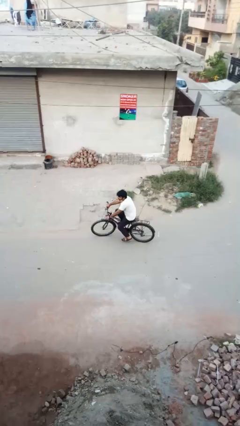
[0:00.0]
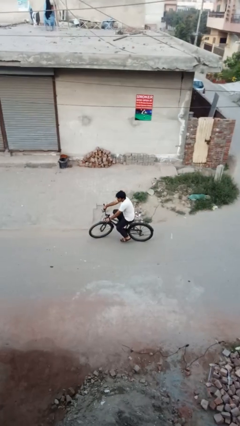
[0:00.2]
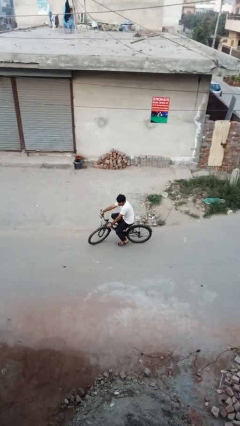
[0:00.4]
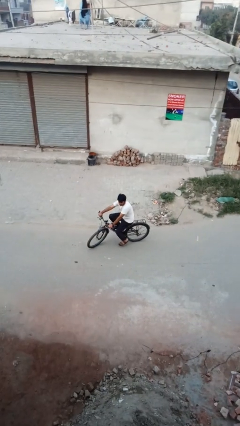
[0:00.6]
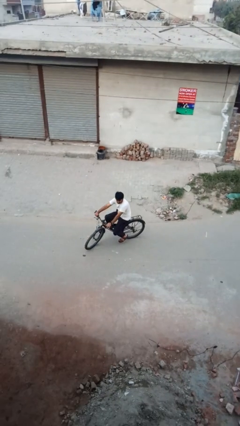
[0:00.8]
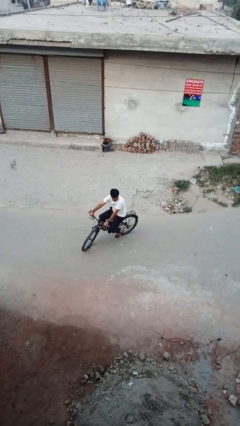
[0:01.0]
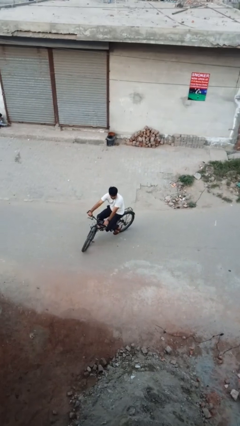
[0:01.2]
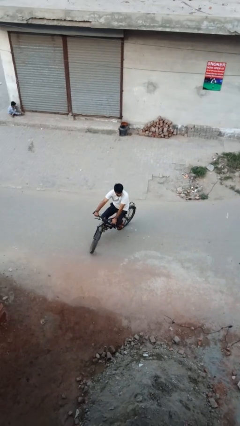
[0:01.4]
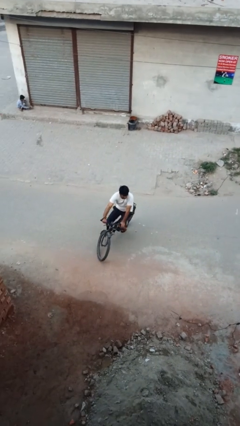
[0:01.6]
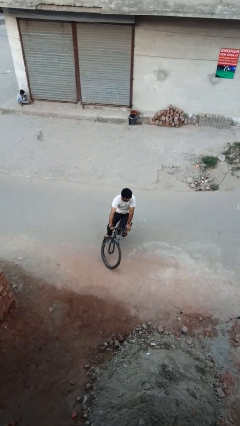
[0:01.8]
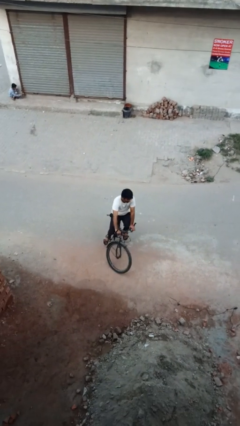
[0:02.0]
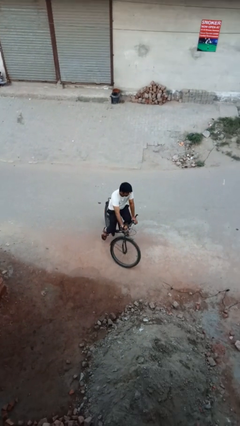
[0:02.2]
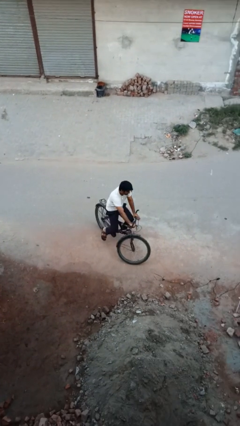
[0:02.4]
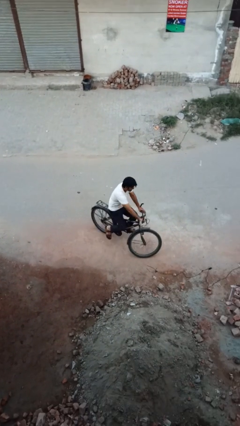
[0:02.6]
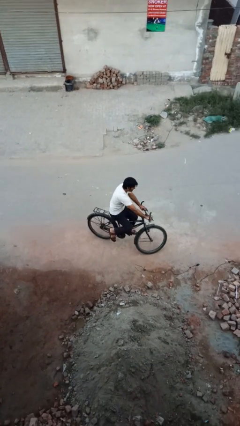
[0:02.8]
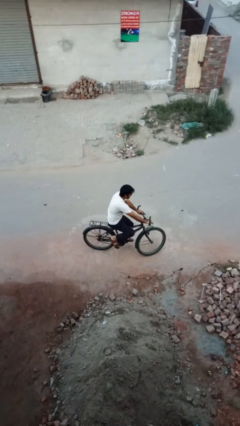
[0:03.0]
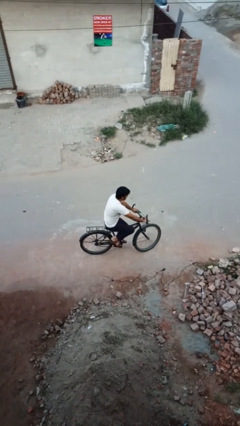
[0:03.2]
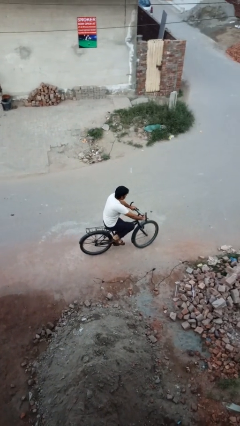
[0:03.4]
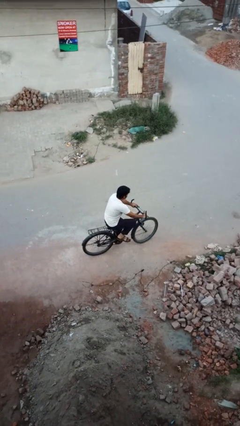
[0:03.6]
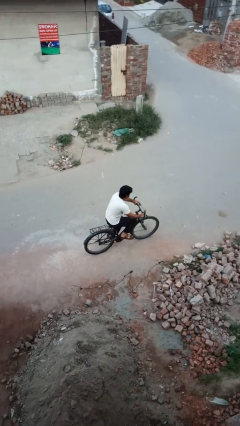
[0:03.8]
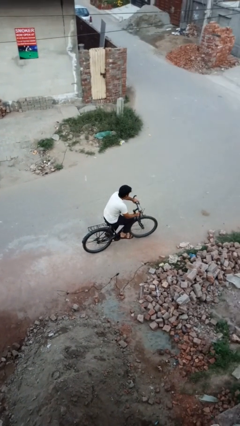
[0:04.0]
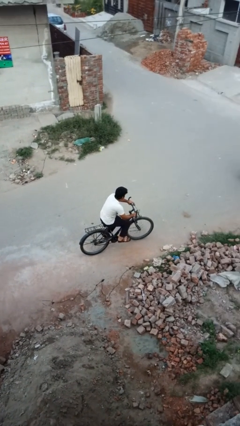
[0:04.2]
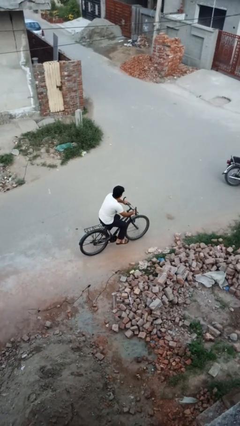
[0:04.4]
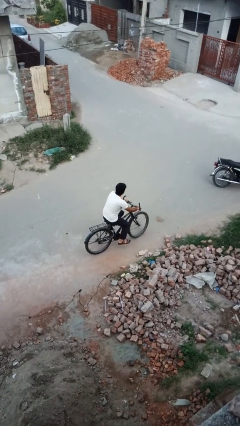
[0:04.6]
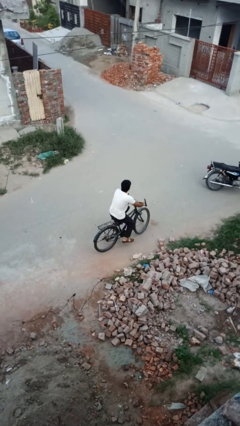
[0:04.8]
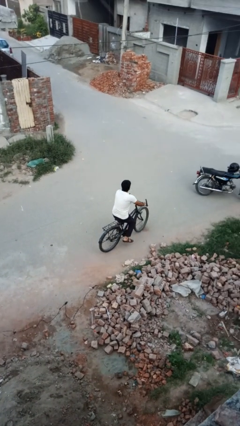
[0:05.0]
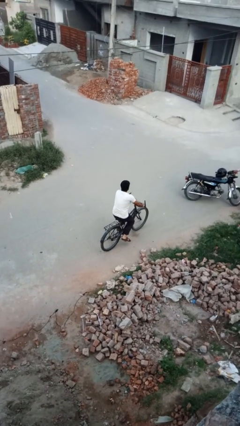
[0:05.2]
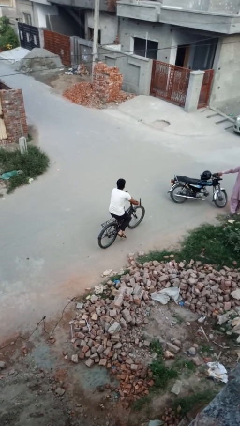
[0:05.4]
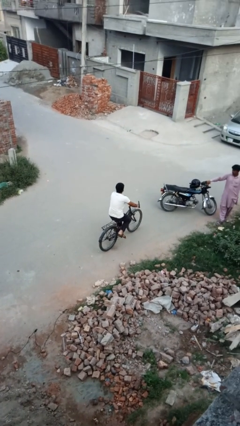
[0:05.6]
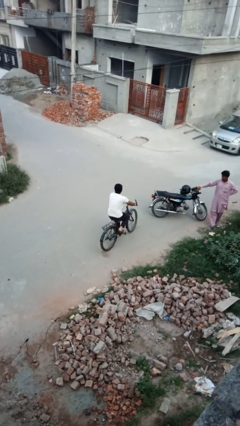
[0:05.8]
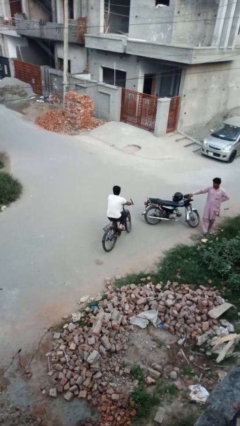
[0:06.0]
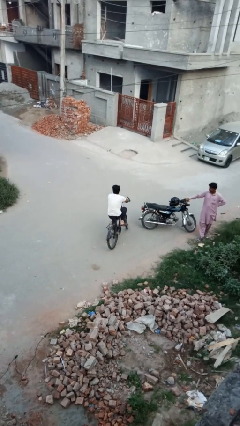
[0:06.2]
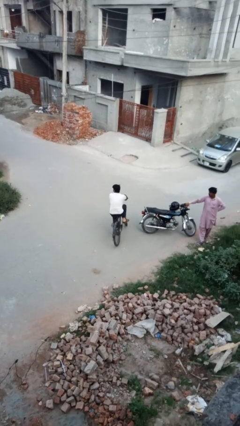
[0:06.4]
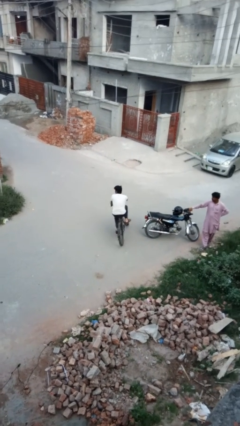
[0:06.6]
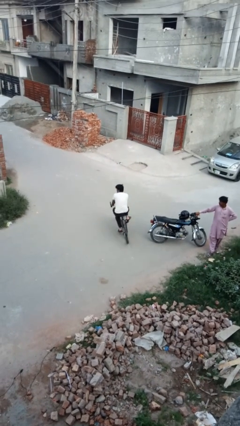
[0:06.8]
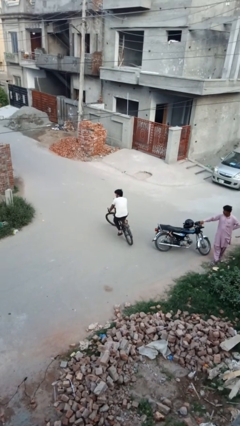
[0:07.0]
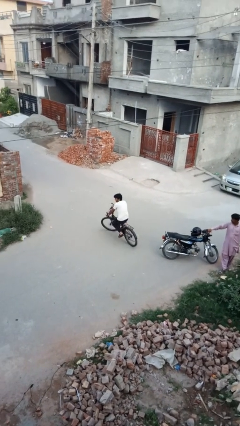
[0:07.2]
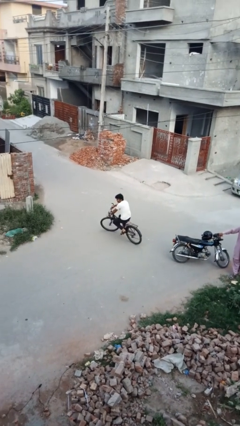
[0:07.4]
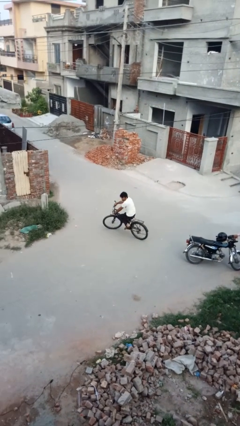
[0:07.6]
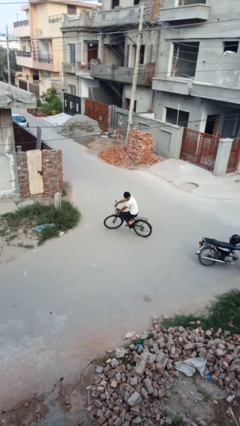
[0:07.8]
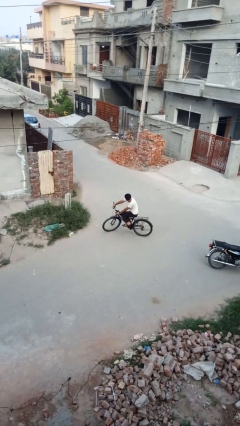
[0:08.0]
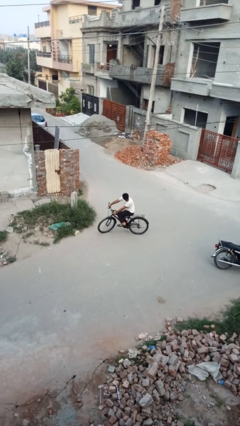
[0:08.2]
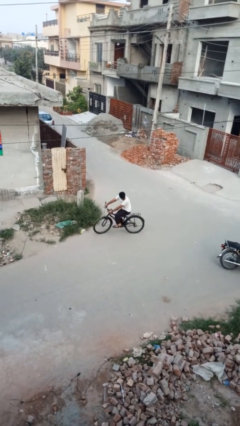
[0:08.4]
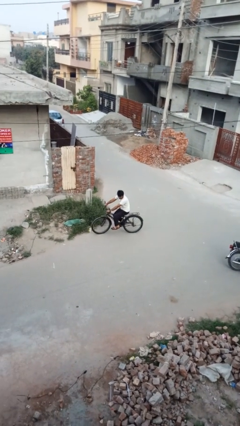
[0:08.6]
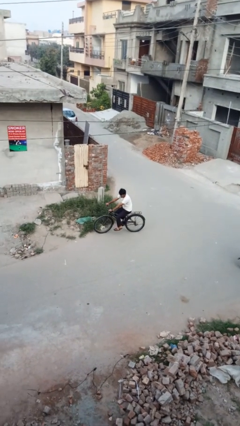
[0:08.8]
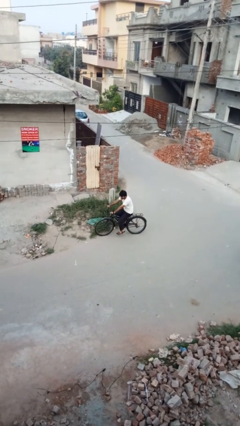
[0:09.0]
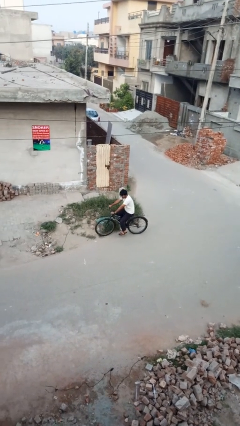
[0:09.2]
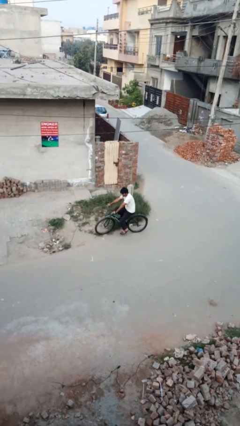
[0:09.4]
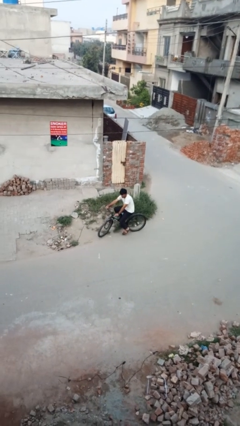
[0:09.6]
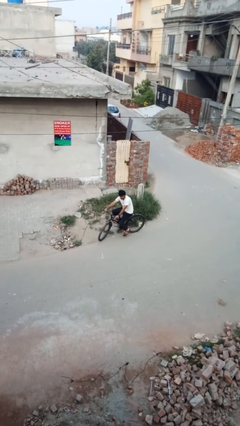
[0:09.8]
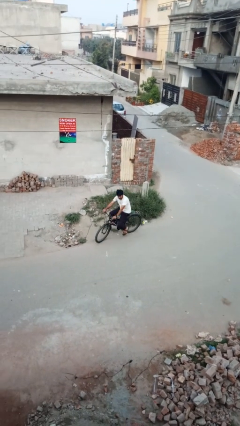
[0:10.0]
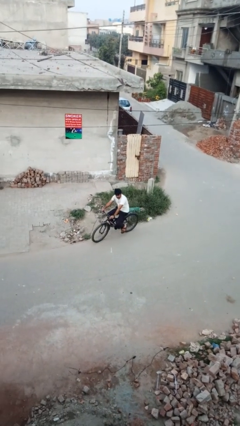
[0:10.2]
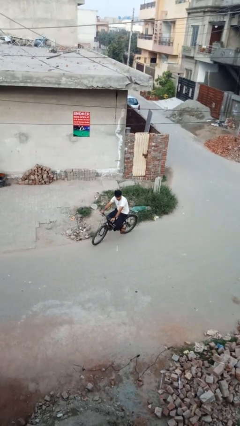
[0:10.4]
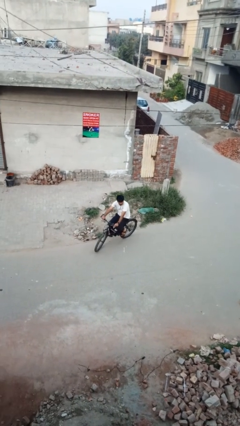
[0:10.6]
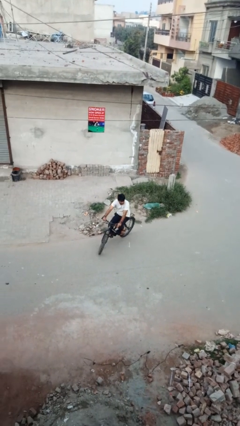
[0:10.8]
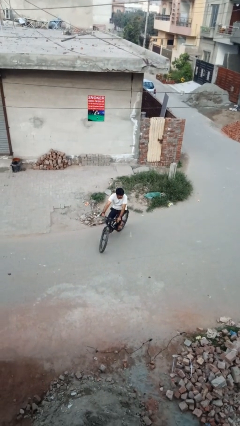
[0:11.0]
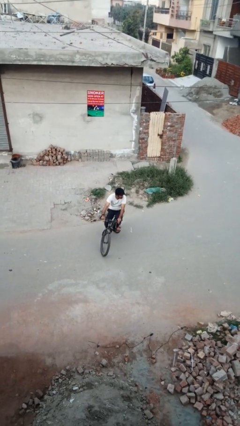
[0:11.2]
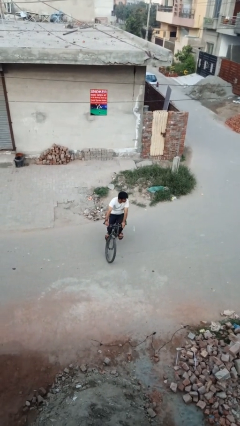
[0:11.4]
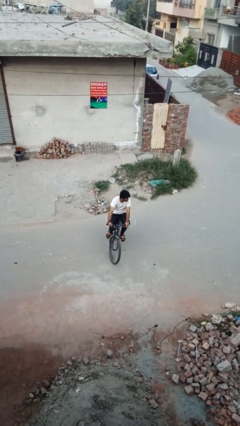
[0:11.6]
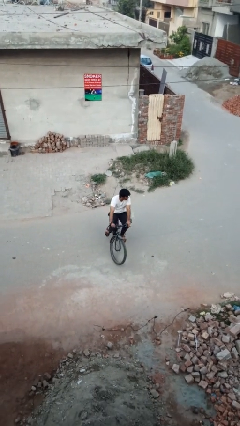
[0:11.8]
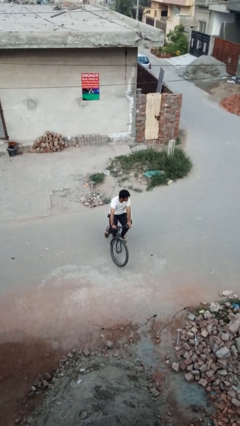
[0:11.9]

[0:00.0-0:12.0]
person rides bicycle

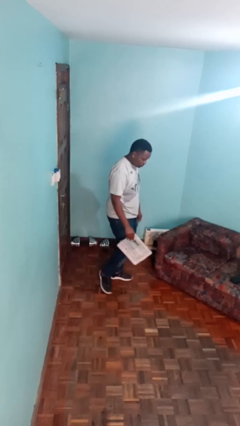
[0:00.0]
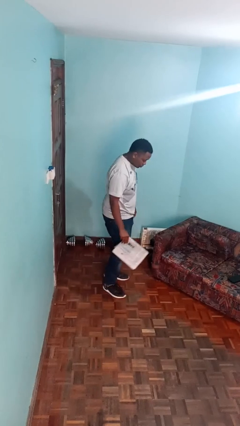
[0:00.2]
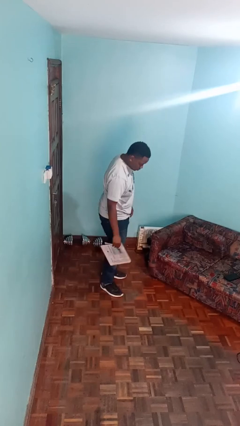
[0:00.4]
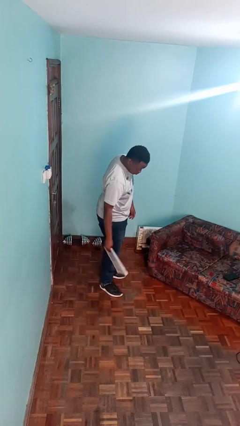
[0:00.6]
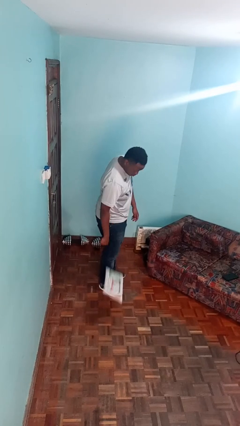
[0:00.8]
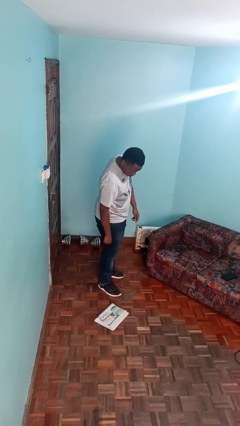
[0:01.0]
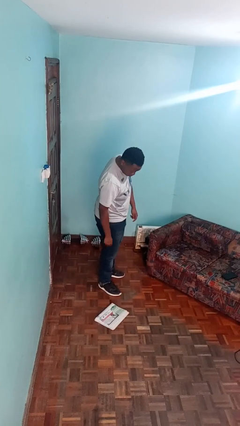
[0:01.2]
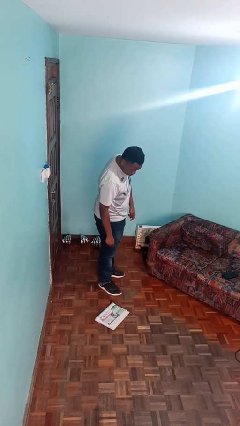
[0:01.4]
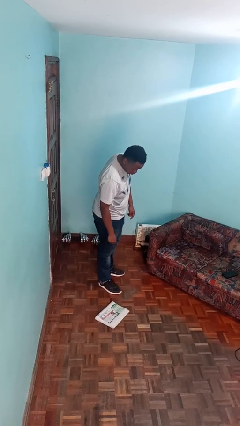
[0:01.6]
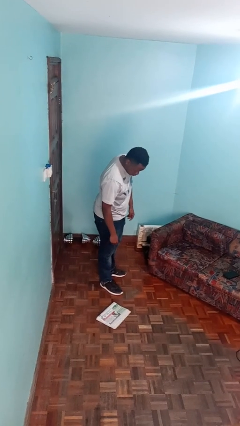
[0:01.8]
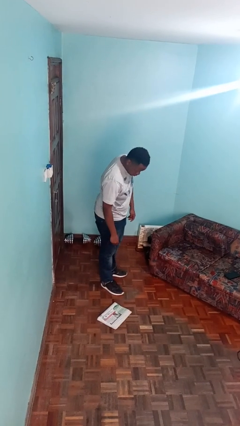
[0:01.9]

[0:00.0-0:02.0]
person drops object

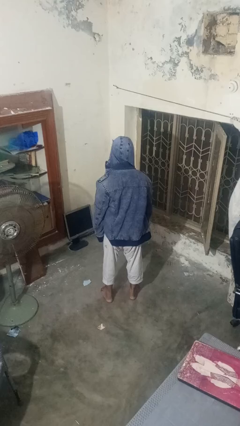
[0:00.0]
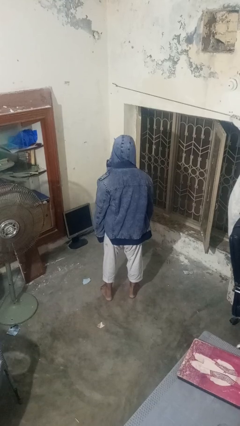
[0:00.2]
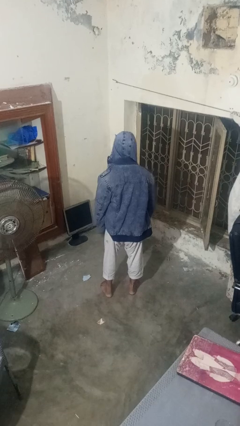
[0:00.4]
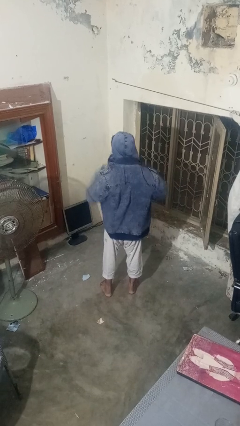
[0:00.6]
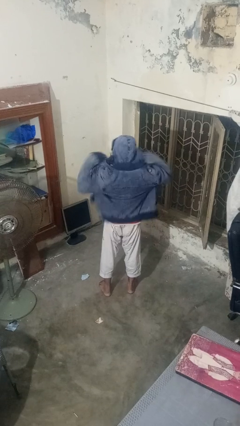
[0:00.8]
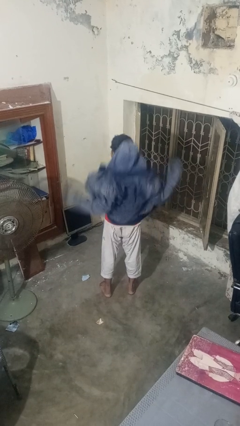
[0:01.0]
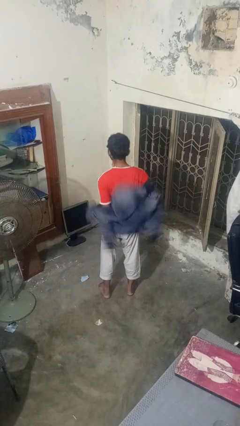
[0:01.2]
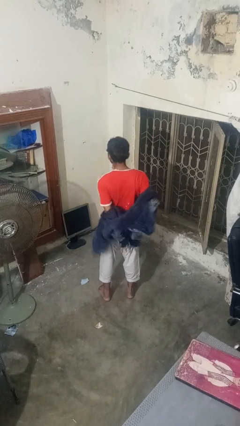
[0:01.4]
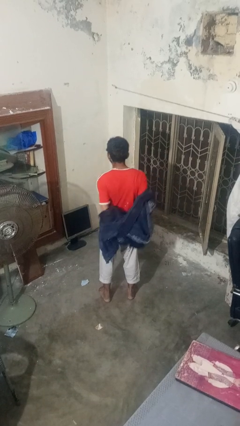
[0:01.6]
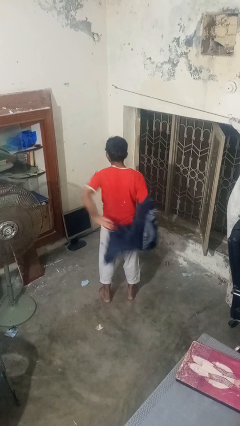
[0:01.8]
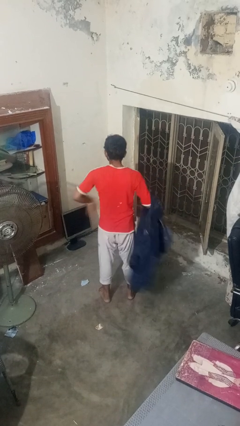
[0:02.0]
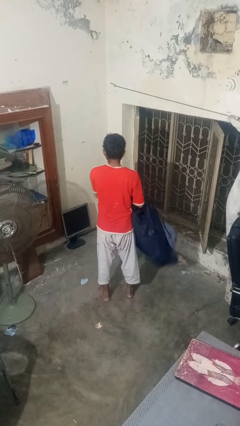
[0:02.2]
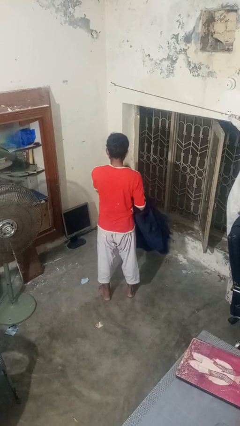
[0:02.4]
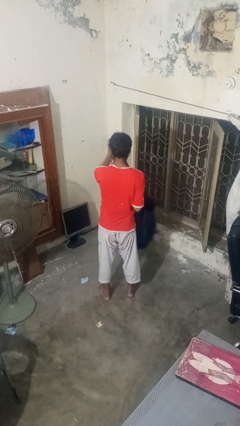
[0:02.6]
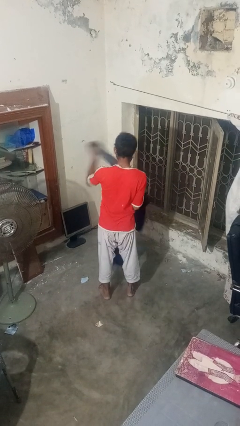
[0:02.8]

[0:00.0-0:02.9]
person takes off hoodie

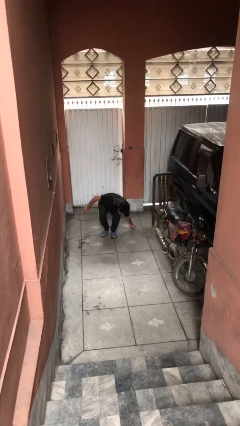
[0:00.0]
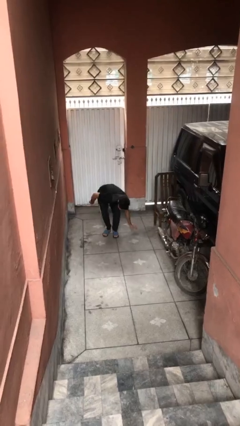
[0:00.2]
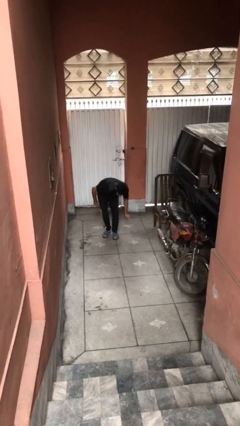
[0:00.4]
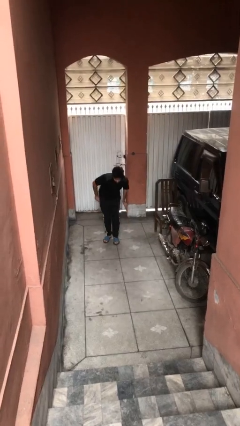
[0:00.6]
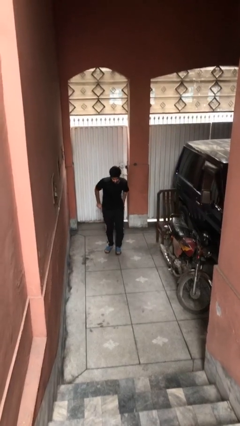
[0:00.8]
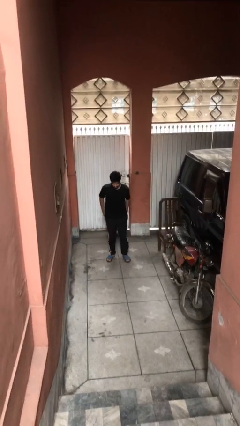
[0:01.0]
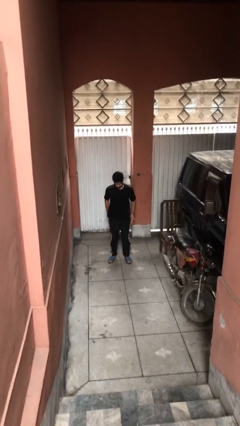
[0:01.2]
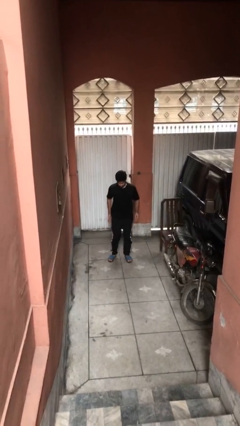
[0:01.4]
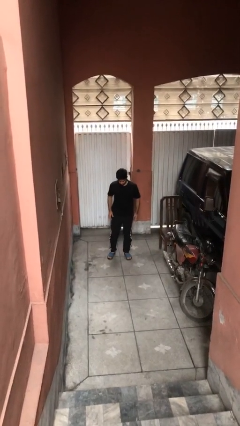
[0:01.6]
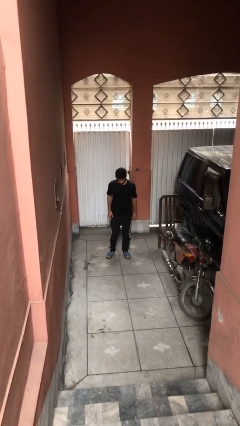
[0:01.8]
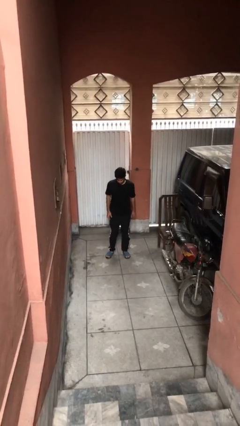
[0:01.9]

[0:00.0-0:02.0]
person stands up
